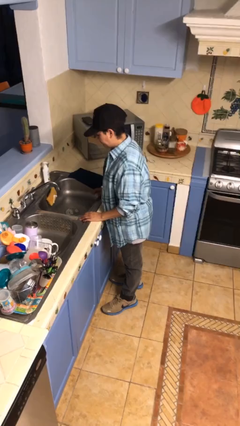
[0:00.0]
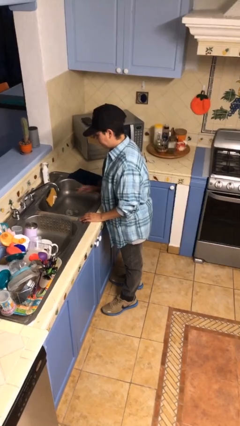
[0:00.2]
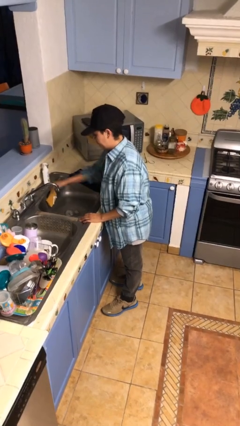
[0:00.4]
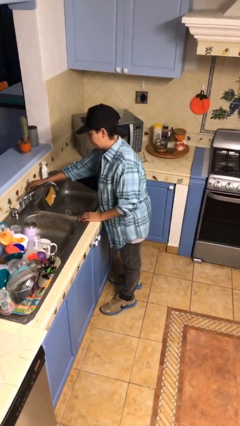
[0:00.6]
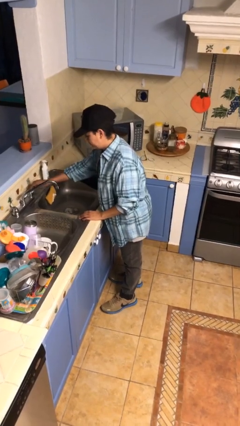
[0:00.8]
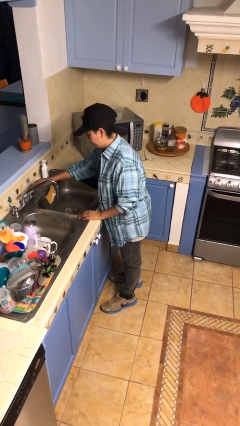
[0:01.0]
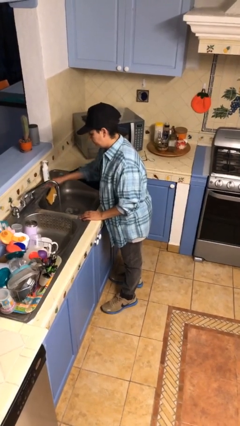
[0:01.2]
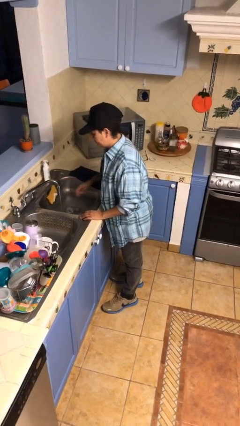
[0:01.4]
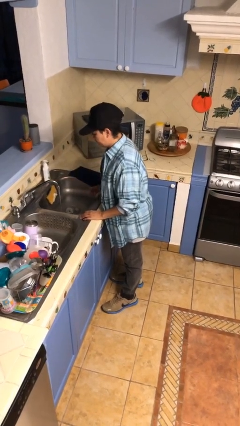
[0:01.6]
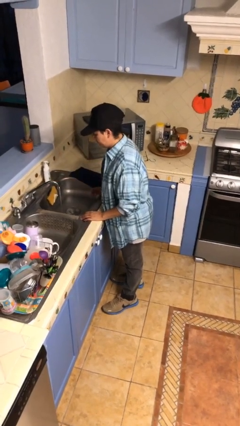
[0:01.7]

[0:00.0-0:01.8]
person turns on faucet

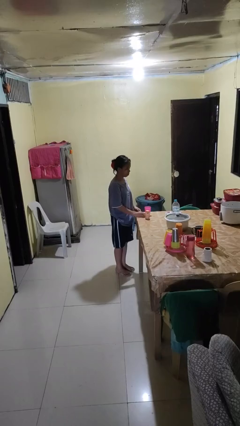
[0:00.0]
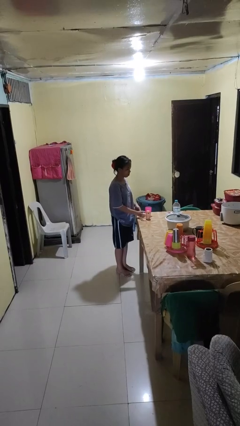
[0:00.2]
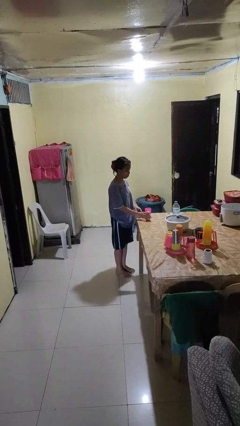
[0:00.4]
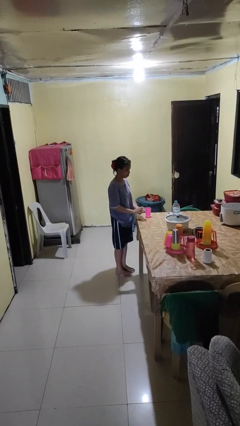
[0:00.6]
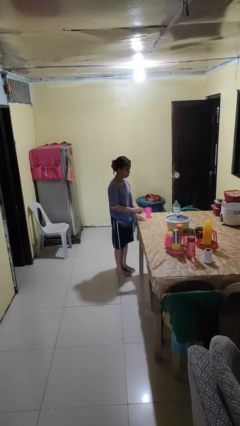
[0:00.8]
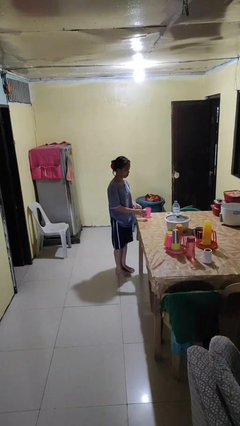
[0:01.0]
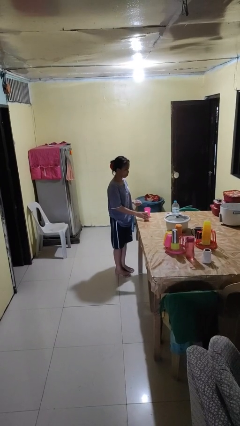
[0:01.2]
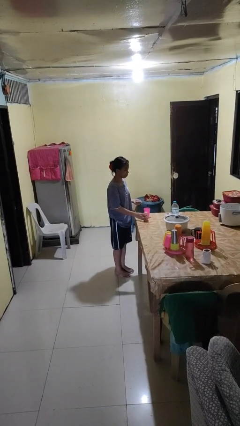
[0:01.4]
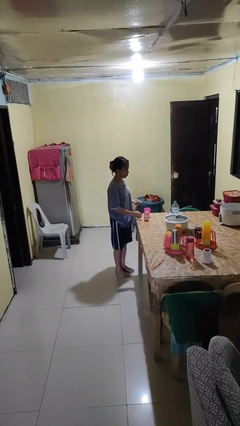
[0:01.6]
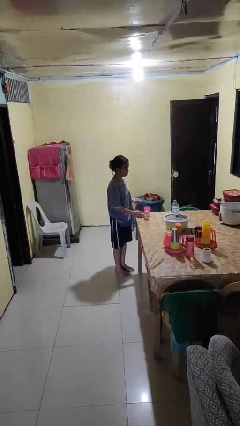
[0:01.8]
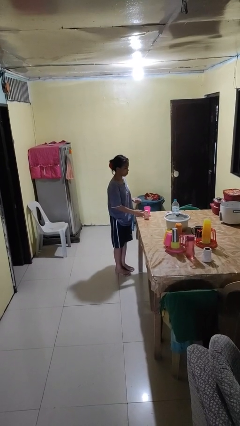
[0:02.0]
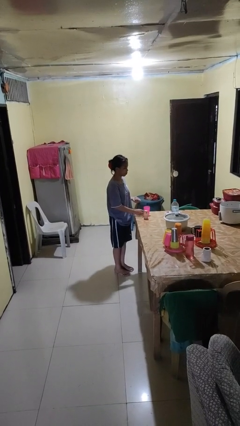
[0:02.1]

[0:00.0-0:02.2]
person takes medicine pills

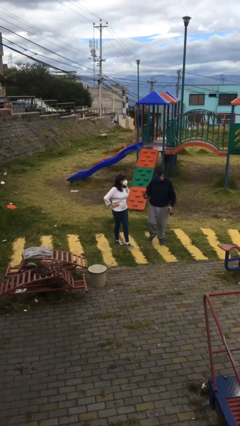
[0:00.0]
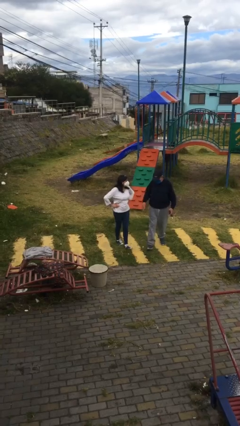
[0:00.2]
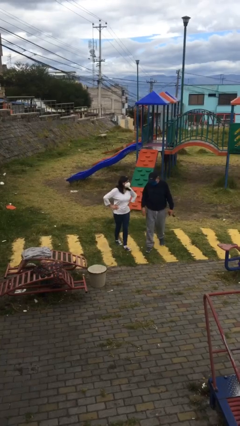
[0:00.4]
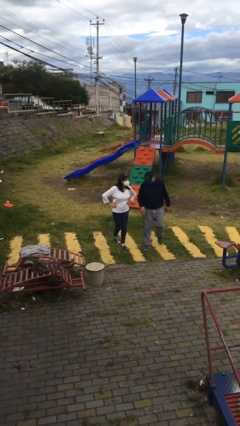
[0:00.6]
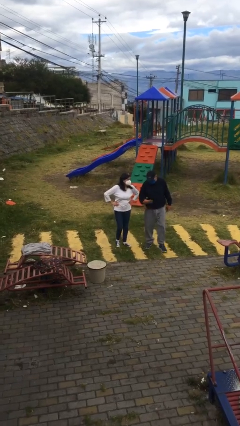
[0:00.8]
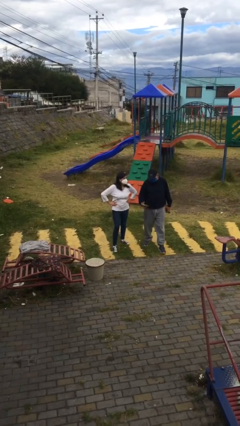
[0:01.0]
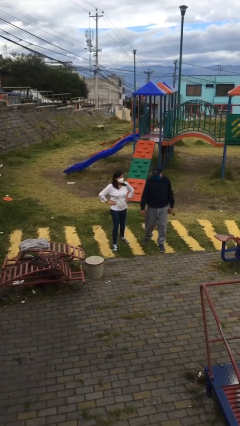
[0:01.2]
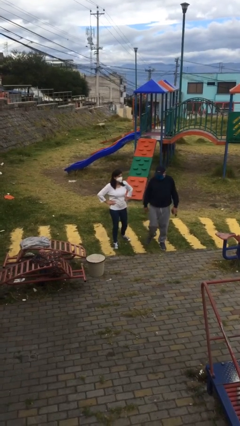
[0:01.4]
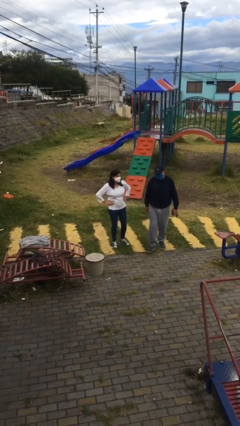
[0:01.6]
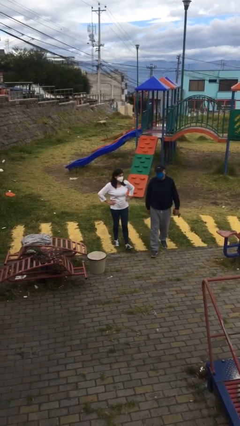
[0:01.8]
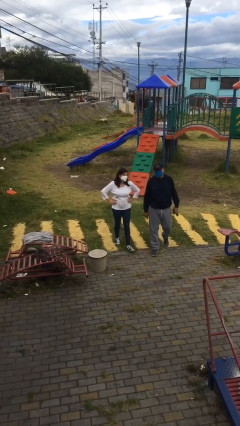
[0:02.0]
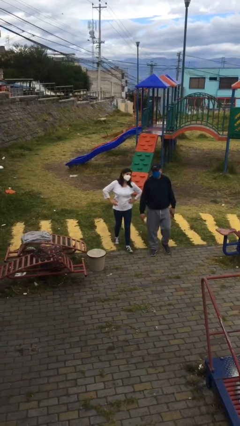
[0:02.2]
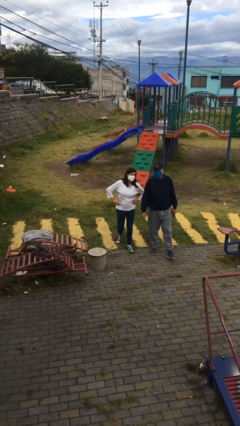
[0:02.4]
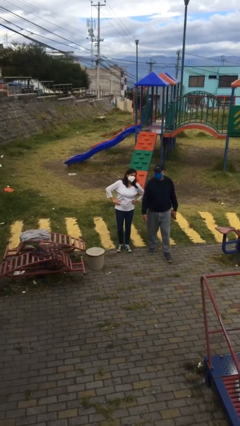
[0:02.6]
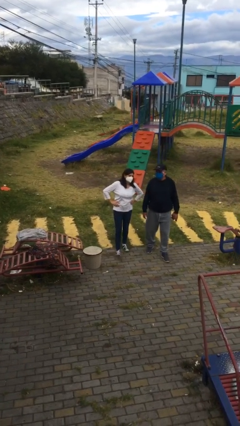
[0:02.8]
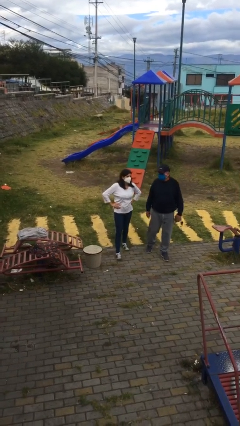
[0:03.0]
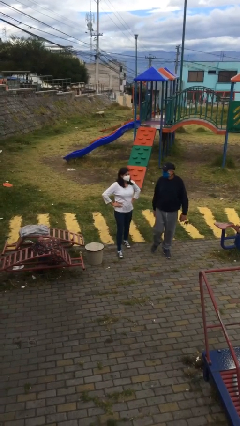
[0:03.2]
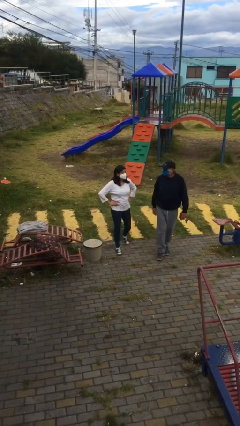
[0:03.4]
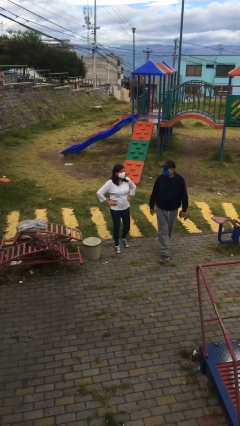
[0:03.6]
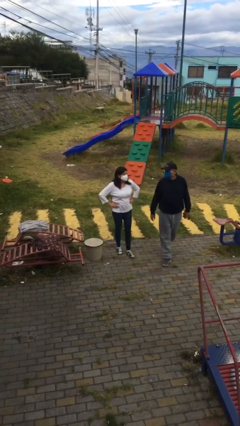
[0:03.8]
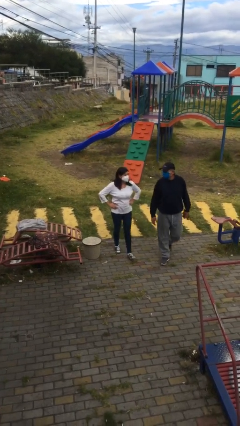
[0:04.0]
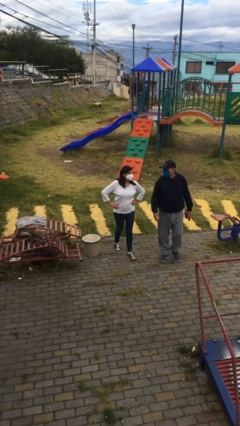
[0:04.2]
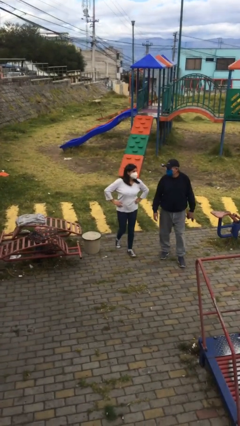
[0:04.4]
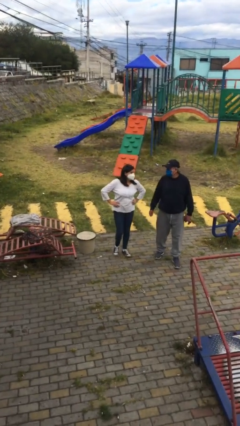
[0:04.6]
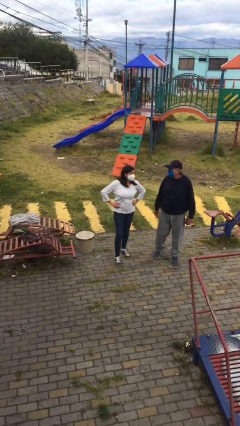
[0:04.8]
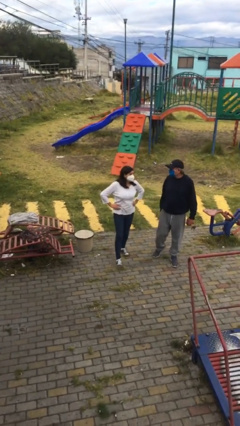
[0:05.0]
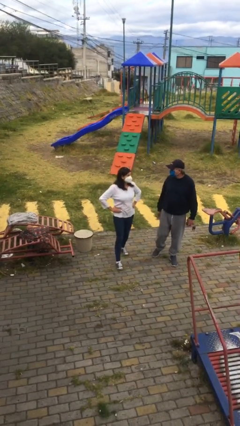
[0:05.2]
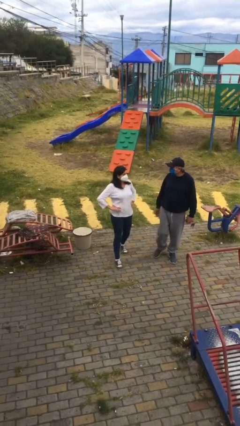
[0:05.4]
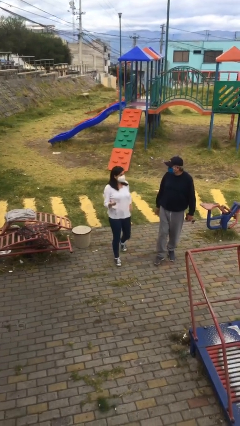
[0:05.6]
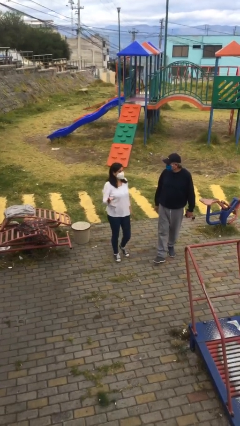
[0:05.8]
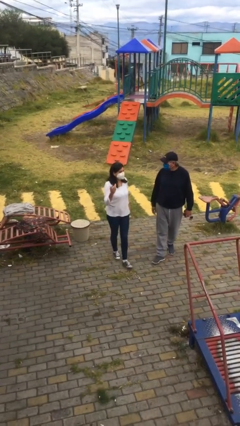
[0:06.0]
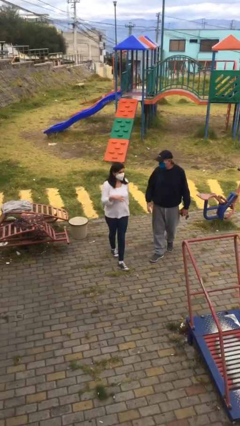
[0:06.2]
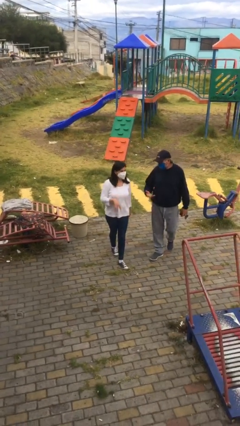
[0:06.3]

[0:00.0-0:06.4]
person talks to person

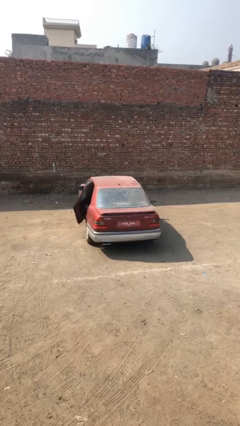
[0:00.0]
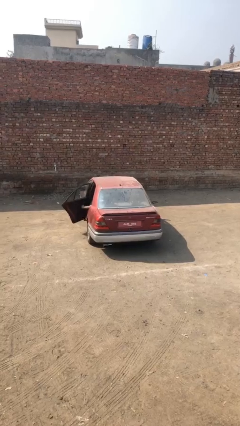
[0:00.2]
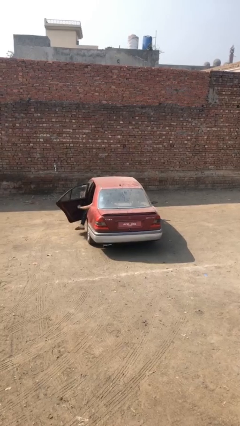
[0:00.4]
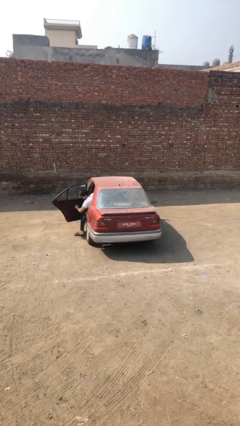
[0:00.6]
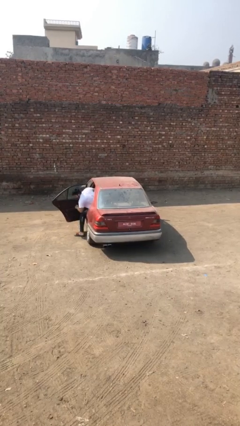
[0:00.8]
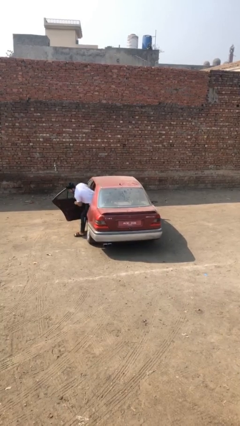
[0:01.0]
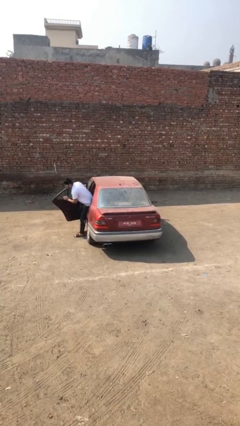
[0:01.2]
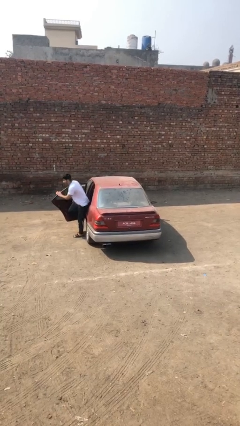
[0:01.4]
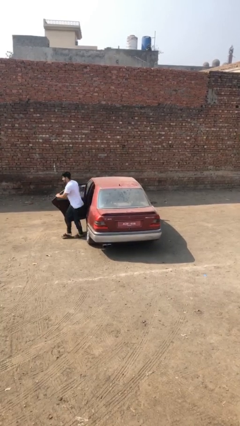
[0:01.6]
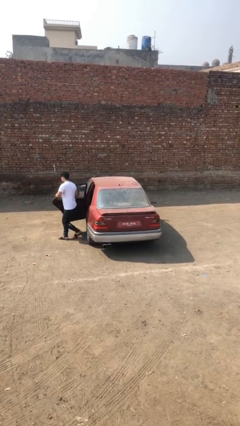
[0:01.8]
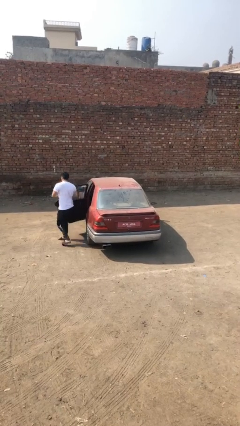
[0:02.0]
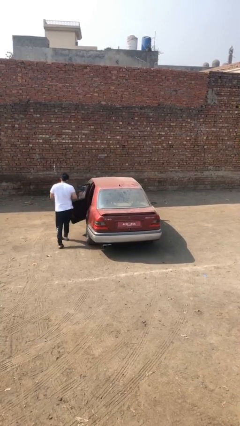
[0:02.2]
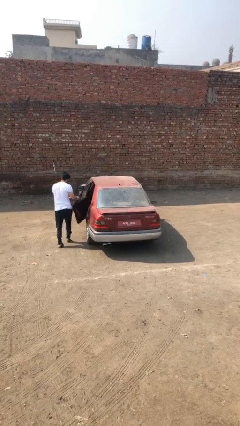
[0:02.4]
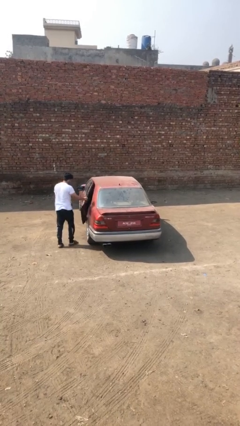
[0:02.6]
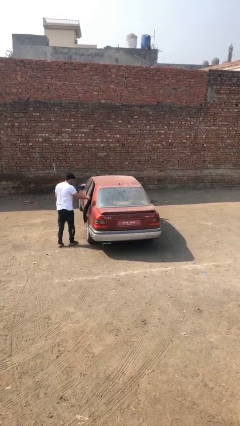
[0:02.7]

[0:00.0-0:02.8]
car drops off person

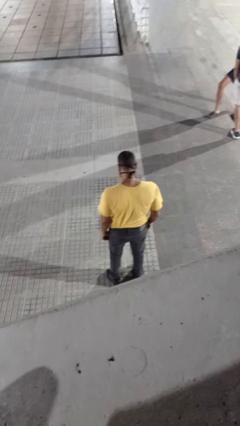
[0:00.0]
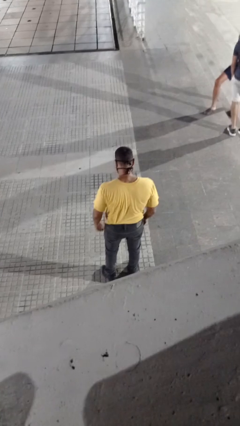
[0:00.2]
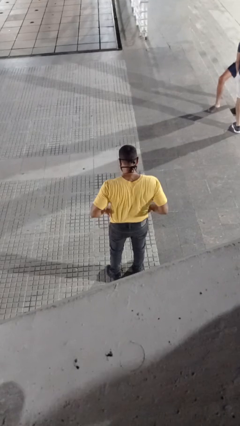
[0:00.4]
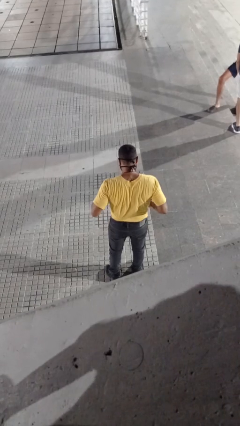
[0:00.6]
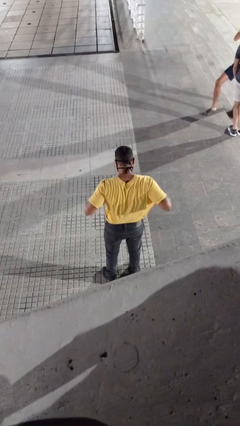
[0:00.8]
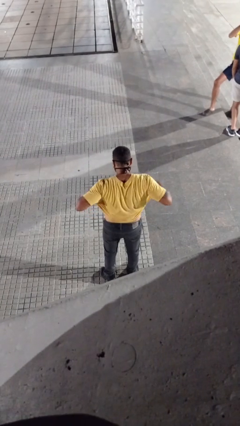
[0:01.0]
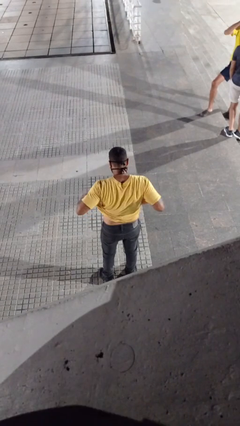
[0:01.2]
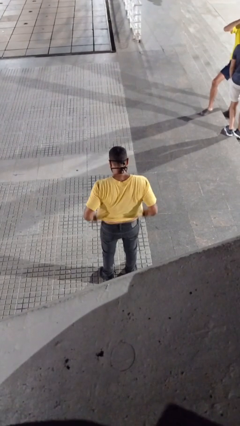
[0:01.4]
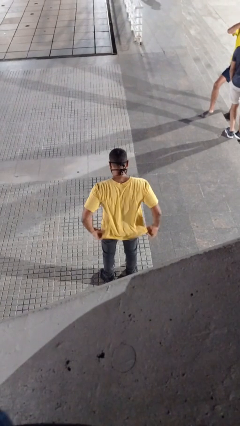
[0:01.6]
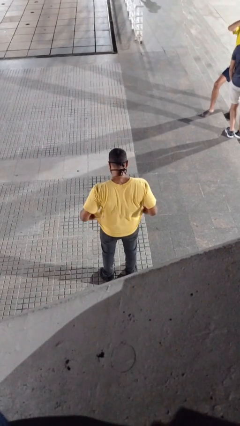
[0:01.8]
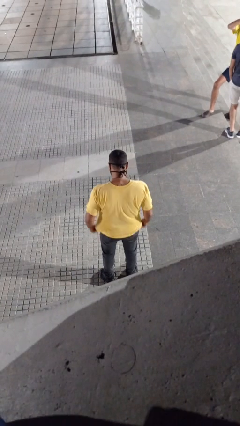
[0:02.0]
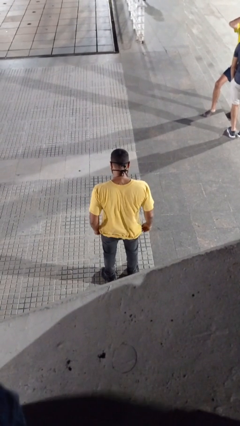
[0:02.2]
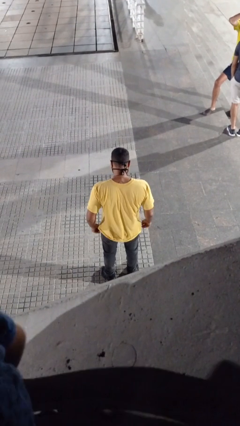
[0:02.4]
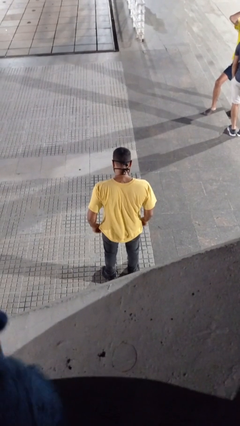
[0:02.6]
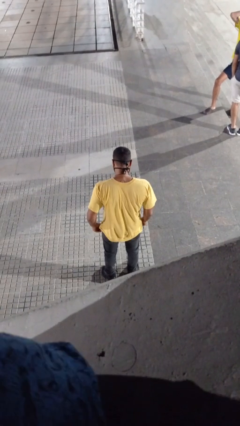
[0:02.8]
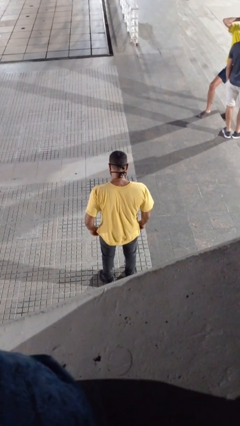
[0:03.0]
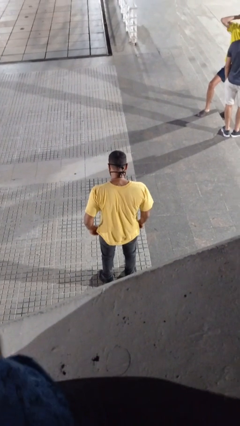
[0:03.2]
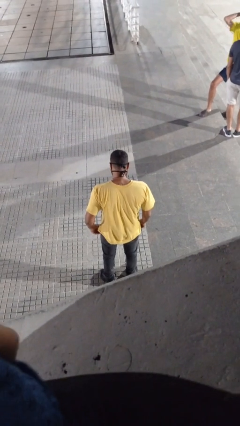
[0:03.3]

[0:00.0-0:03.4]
person untucks shirt

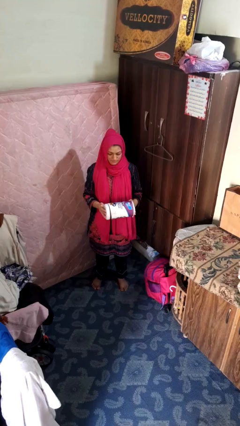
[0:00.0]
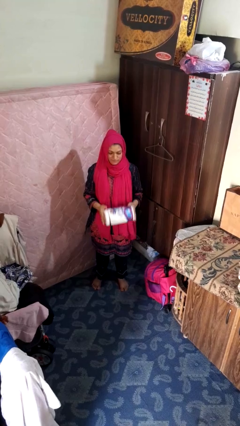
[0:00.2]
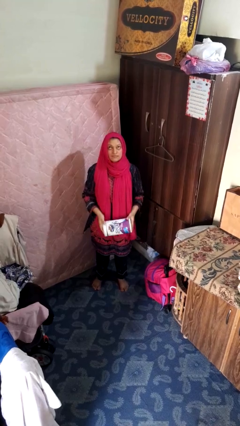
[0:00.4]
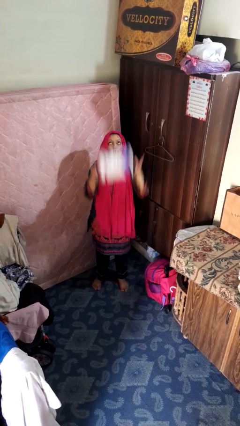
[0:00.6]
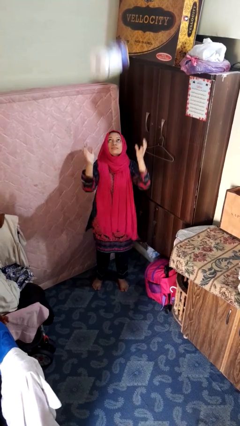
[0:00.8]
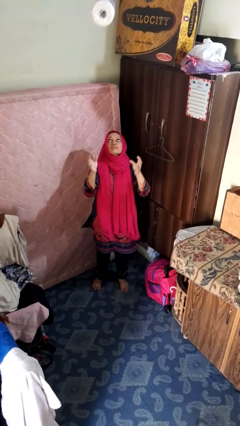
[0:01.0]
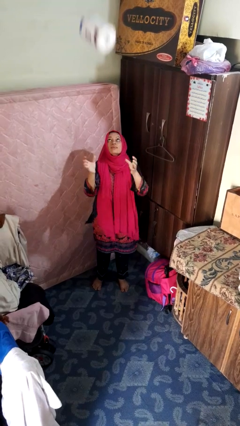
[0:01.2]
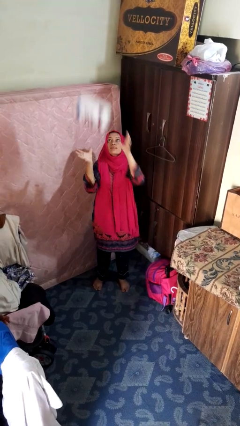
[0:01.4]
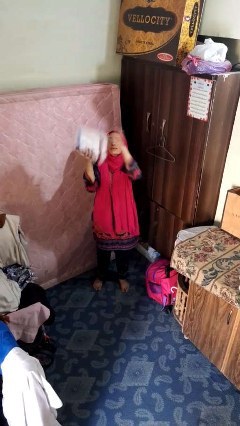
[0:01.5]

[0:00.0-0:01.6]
person drops object
